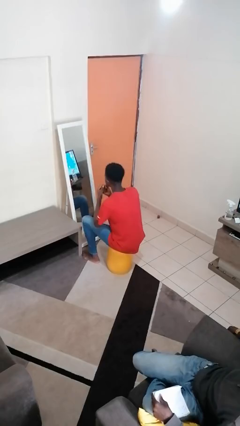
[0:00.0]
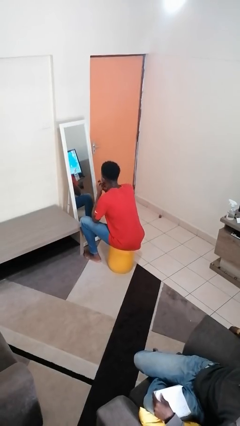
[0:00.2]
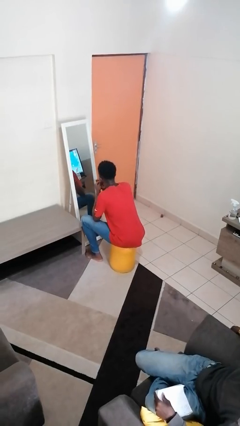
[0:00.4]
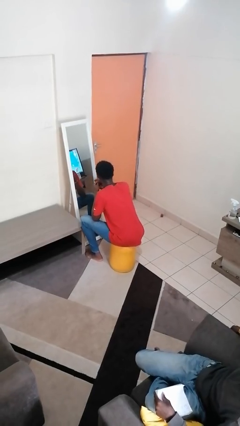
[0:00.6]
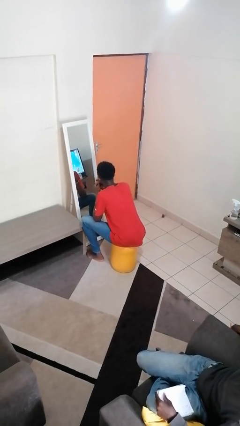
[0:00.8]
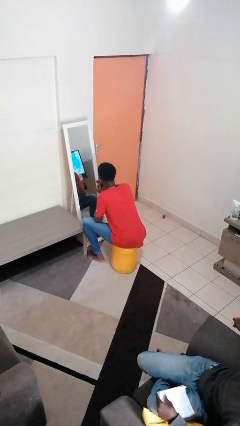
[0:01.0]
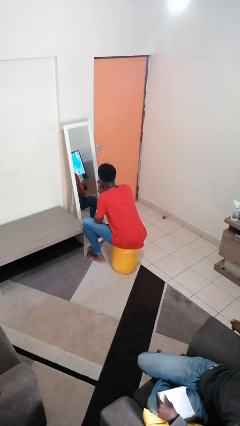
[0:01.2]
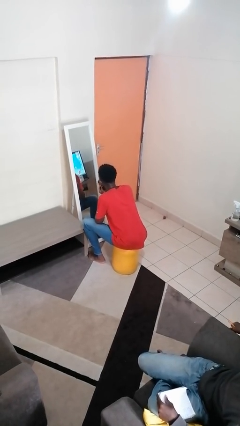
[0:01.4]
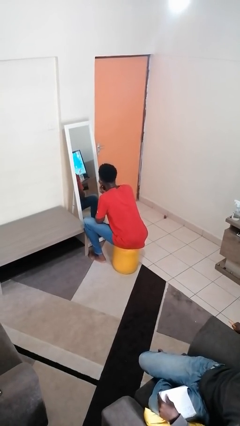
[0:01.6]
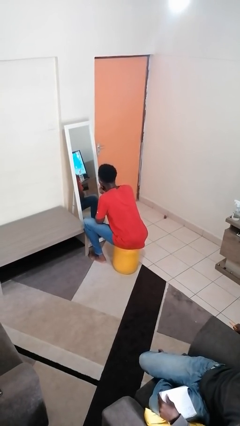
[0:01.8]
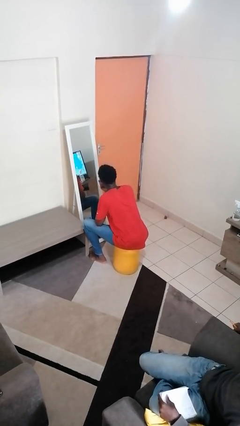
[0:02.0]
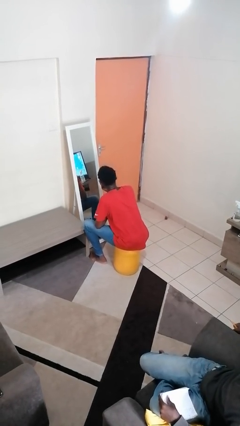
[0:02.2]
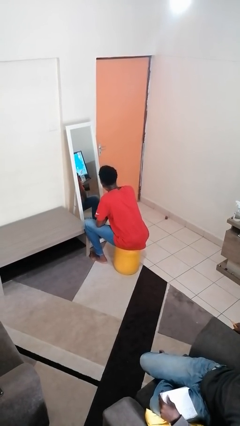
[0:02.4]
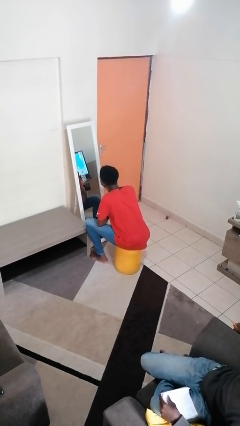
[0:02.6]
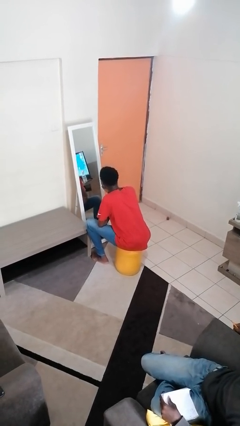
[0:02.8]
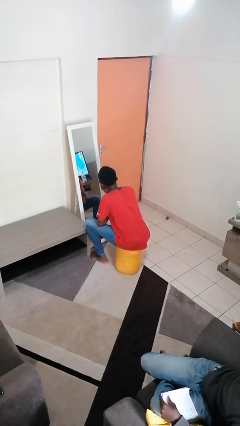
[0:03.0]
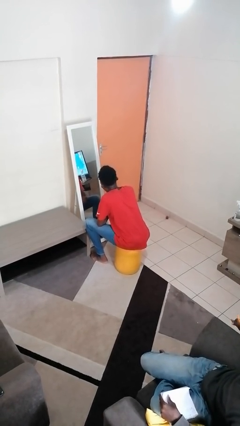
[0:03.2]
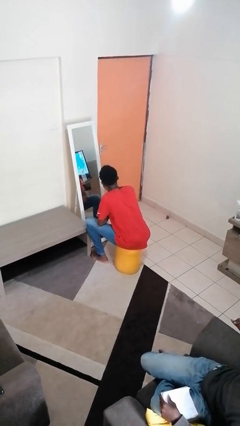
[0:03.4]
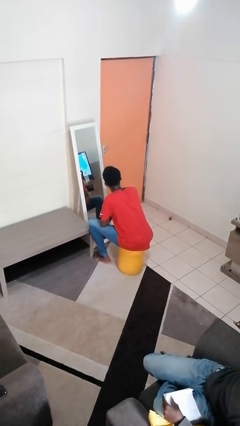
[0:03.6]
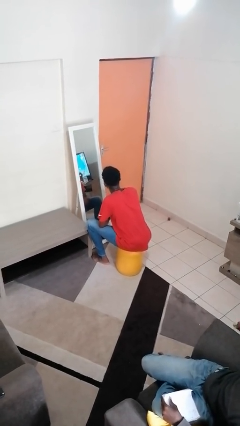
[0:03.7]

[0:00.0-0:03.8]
person applies lip makeup

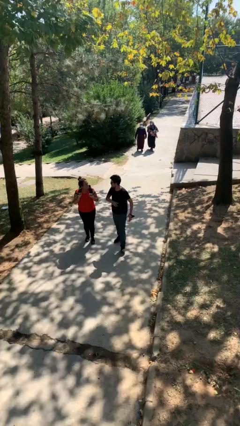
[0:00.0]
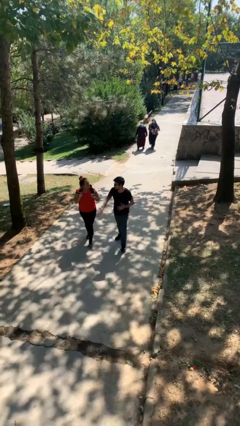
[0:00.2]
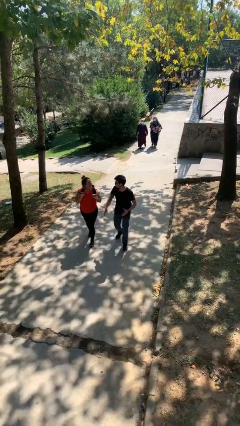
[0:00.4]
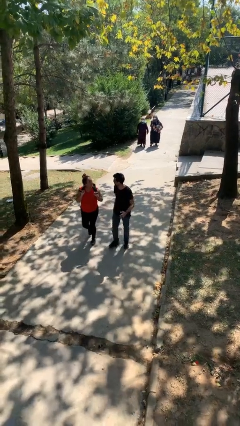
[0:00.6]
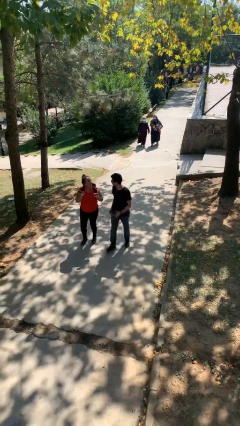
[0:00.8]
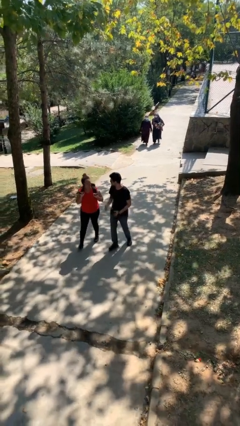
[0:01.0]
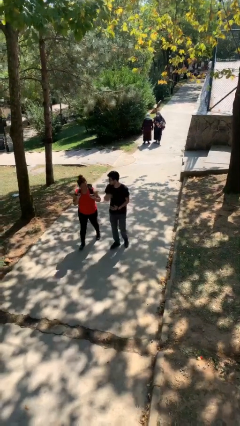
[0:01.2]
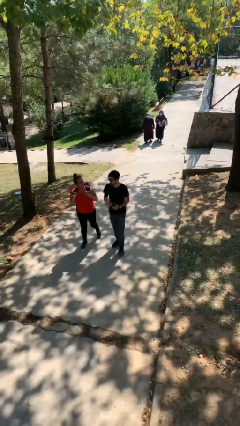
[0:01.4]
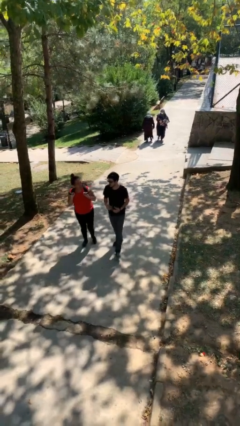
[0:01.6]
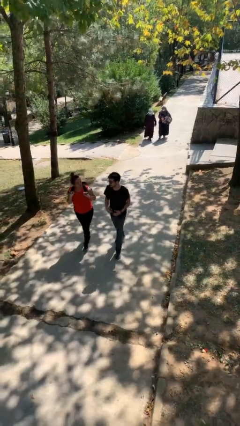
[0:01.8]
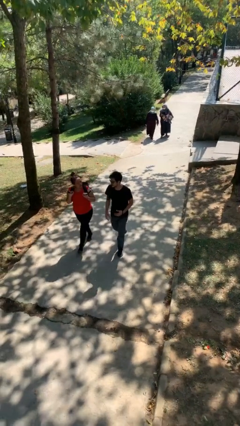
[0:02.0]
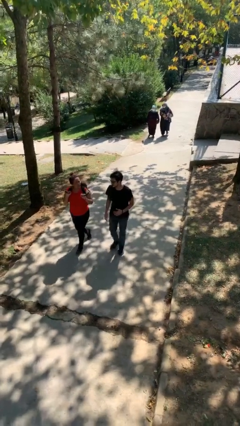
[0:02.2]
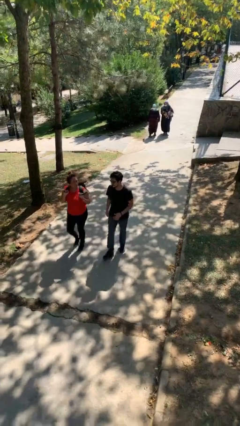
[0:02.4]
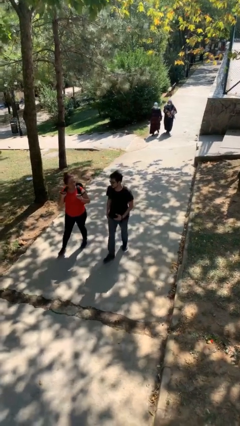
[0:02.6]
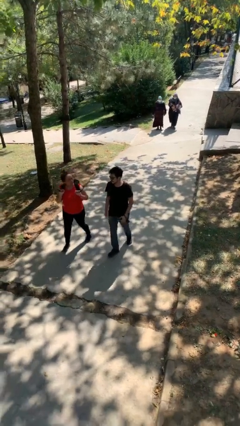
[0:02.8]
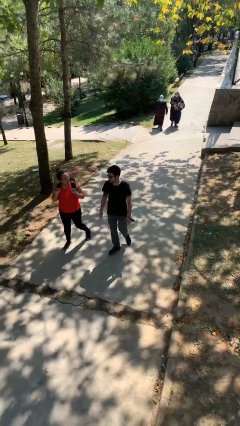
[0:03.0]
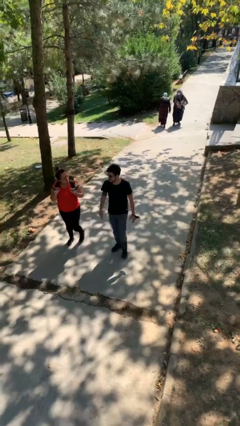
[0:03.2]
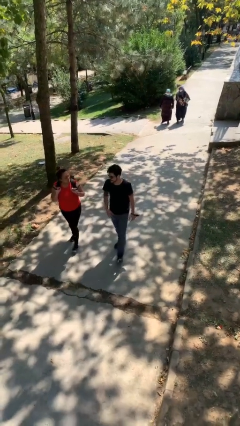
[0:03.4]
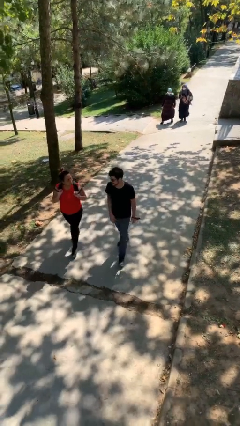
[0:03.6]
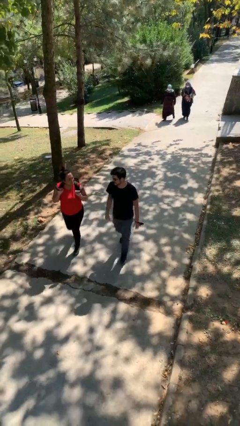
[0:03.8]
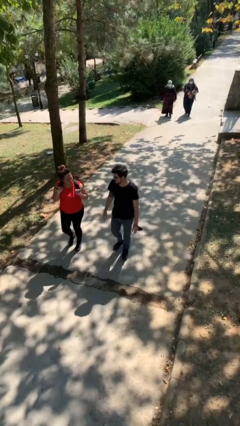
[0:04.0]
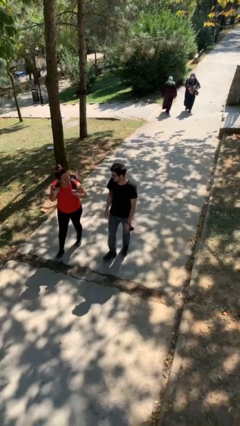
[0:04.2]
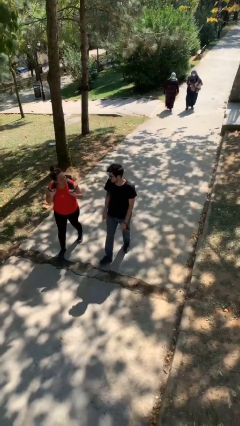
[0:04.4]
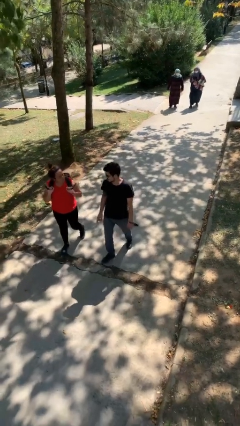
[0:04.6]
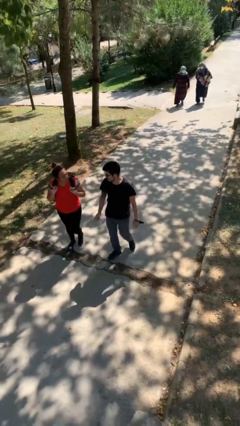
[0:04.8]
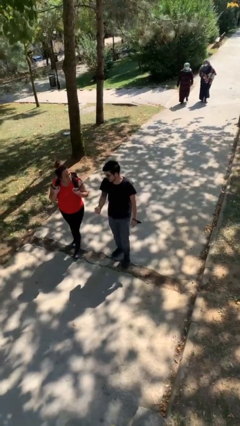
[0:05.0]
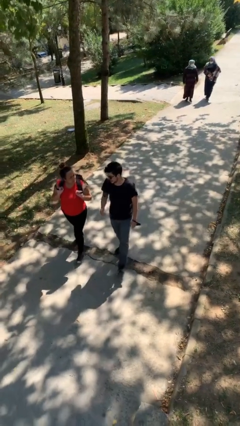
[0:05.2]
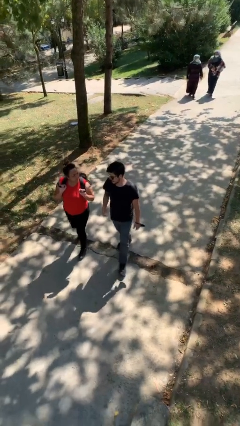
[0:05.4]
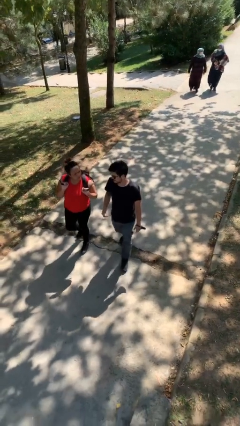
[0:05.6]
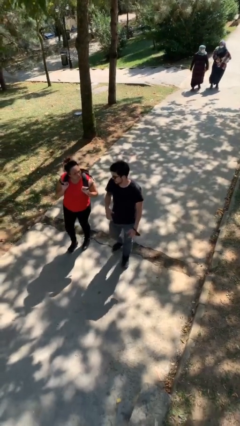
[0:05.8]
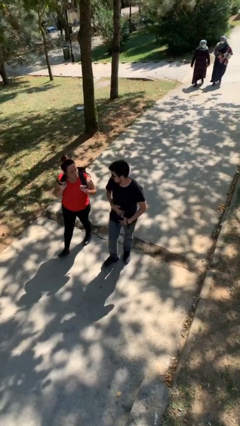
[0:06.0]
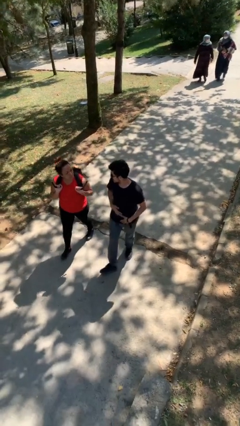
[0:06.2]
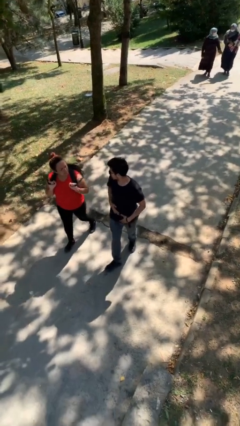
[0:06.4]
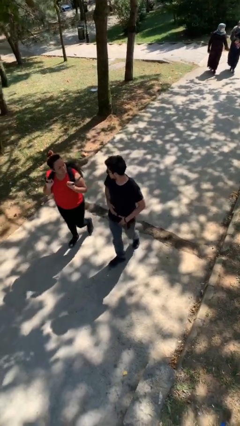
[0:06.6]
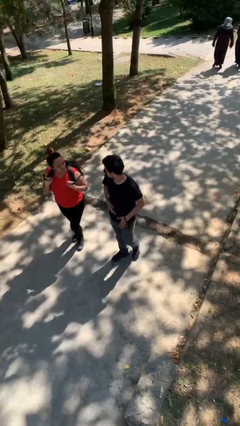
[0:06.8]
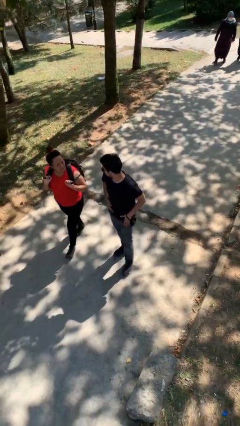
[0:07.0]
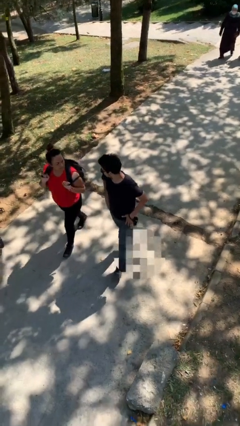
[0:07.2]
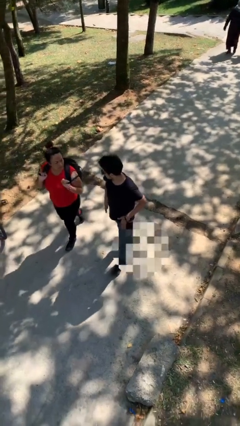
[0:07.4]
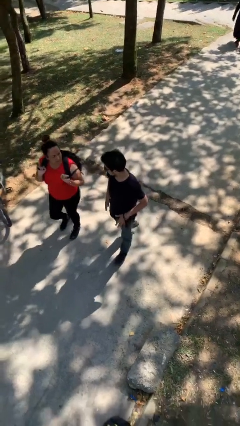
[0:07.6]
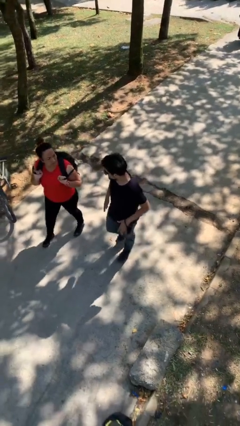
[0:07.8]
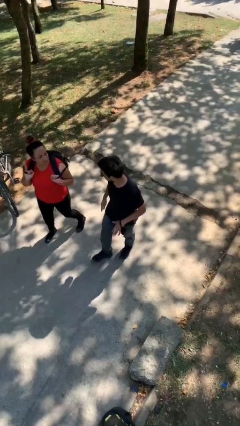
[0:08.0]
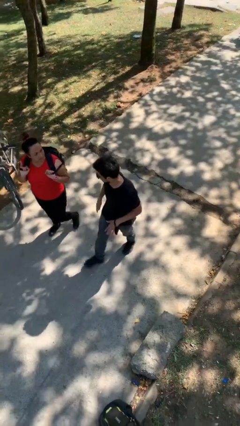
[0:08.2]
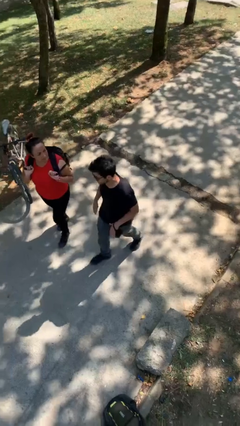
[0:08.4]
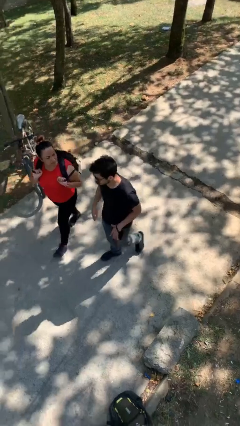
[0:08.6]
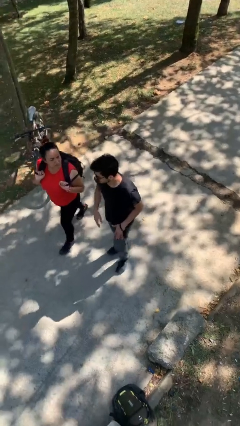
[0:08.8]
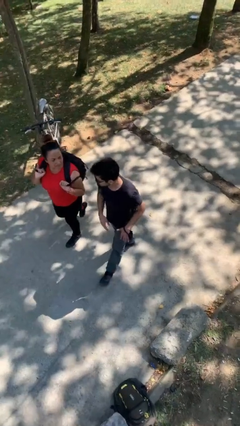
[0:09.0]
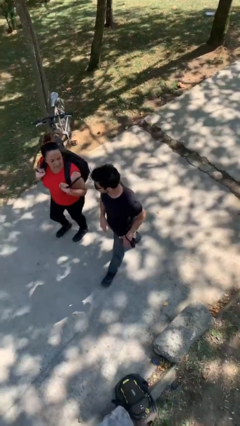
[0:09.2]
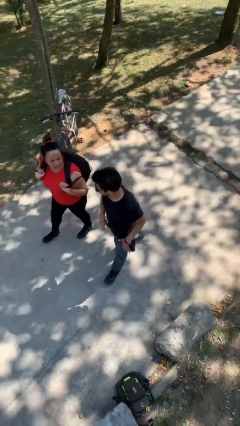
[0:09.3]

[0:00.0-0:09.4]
person talks to person

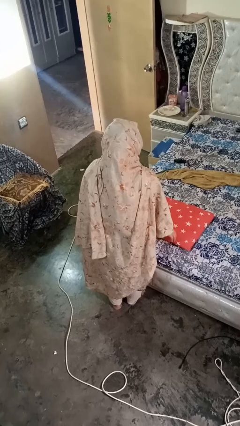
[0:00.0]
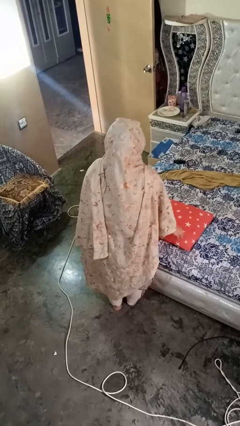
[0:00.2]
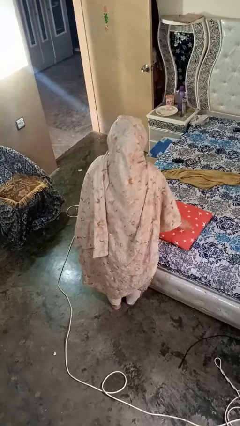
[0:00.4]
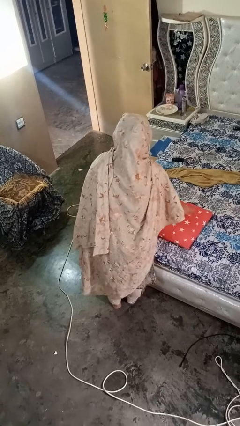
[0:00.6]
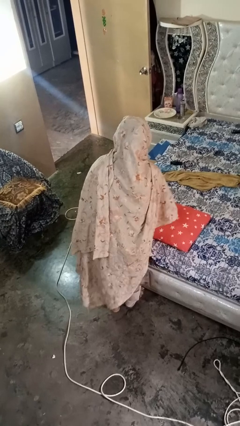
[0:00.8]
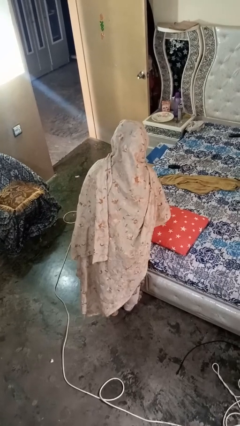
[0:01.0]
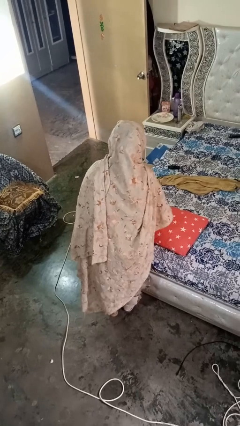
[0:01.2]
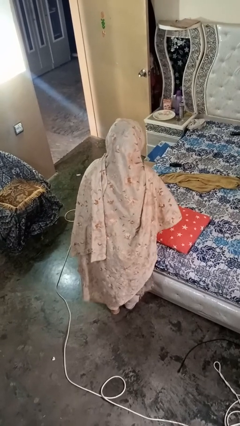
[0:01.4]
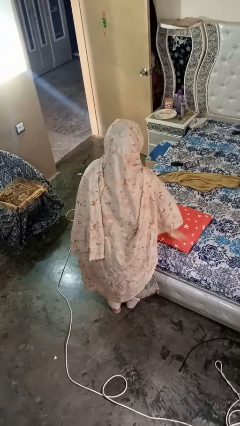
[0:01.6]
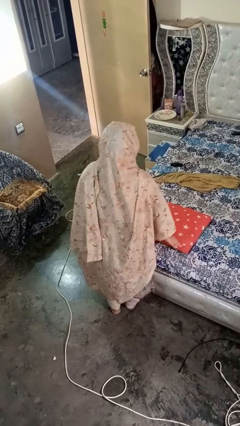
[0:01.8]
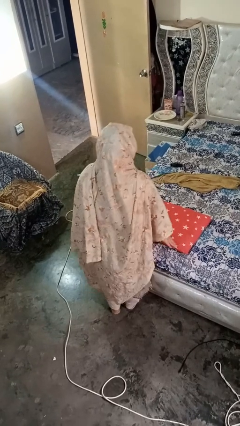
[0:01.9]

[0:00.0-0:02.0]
person waves hand over object

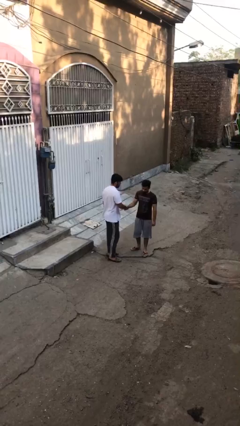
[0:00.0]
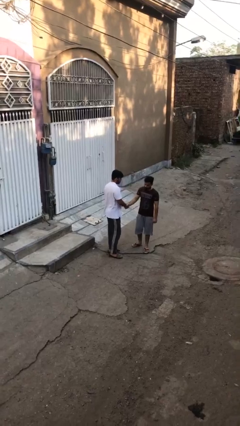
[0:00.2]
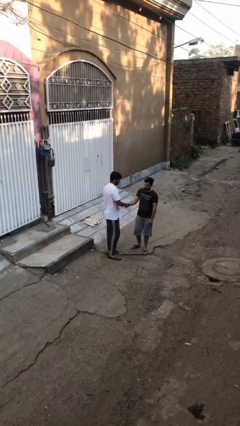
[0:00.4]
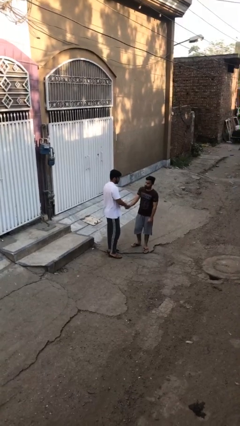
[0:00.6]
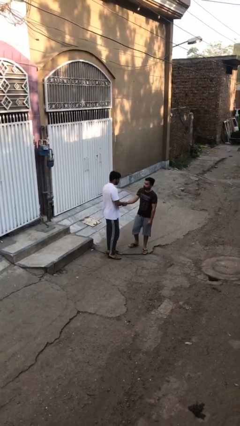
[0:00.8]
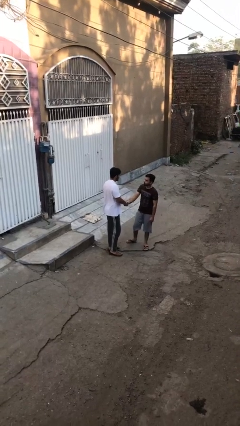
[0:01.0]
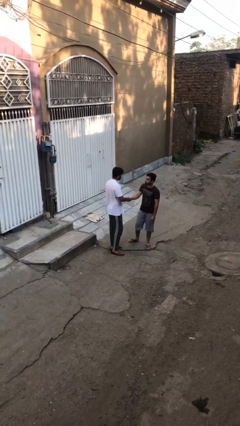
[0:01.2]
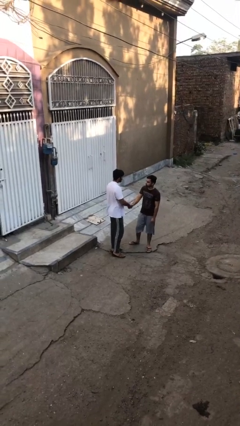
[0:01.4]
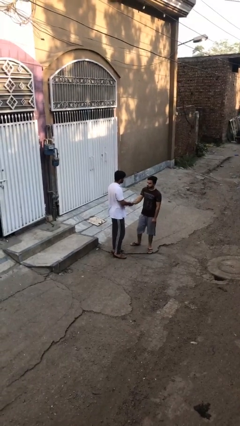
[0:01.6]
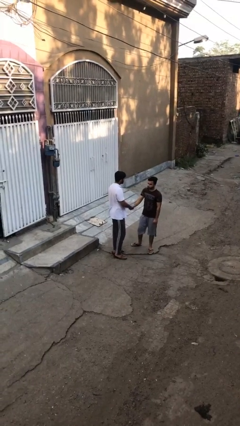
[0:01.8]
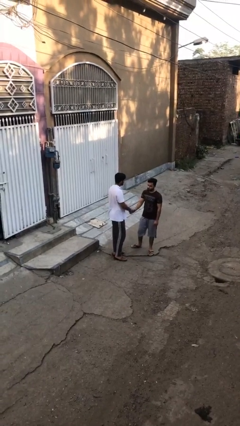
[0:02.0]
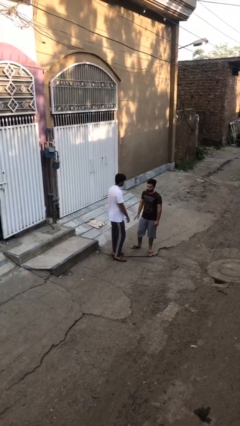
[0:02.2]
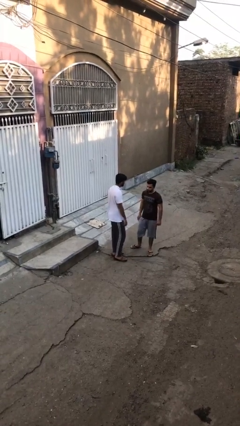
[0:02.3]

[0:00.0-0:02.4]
person shakes hand

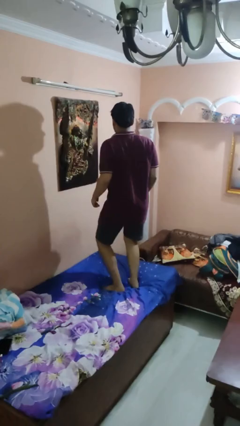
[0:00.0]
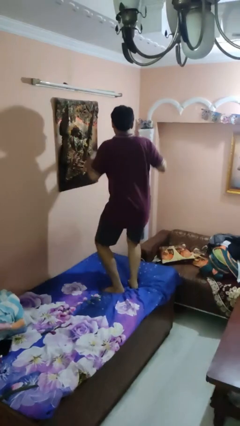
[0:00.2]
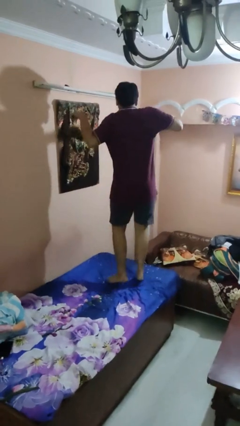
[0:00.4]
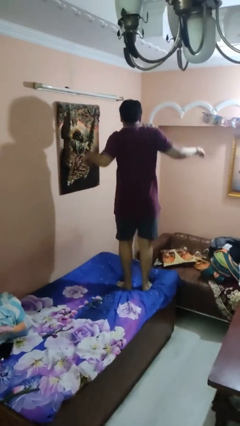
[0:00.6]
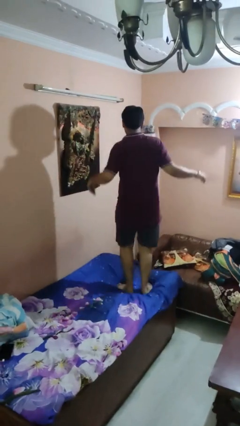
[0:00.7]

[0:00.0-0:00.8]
person jumps on bed
